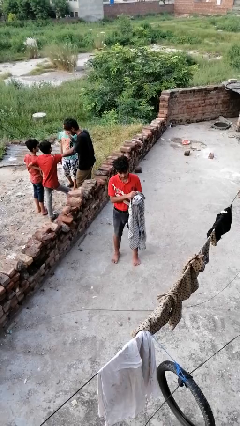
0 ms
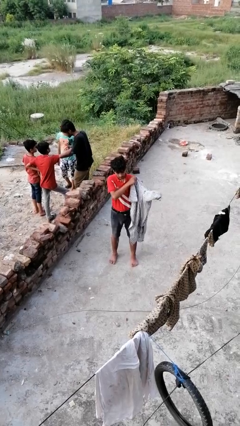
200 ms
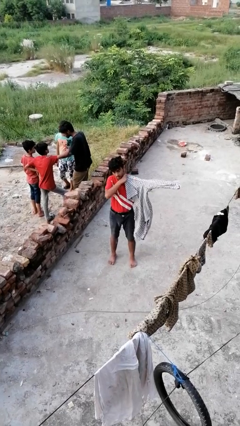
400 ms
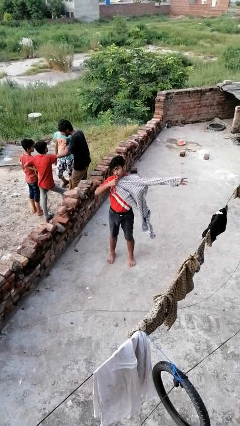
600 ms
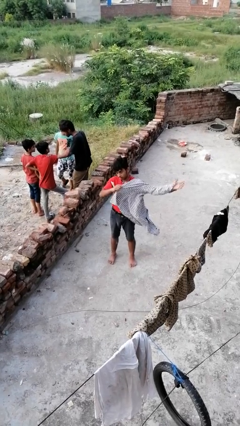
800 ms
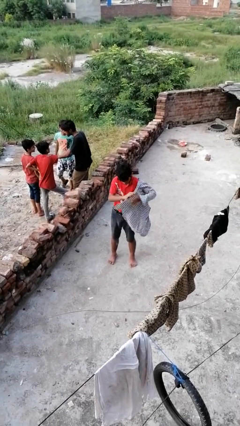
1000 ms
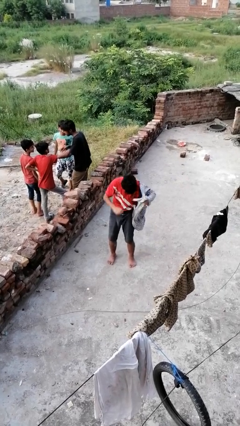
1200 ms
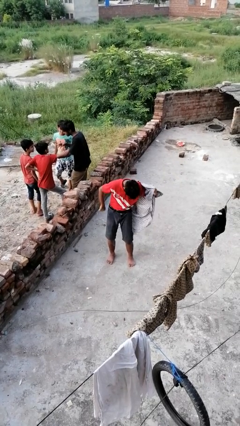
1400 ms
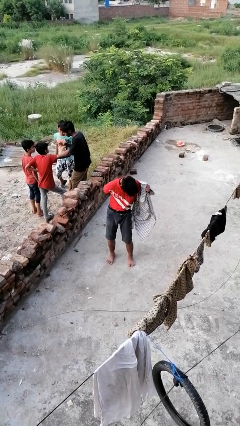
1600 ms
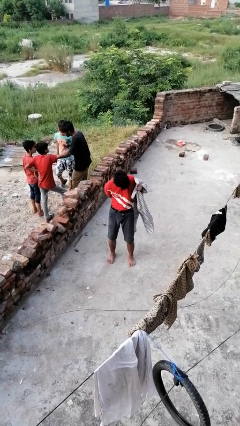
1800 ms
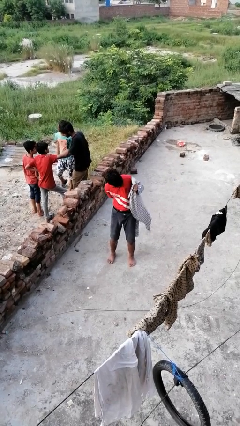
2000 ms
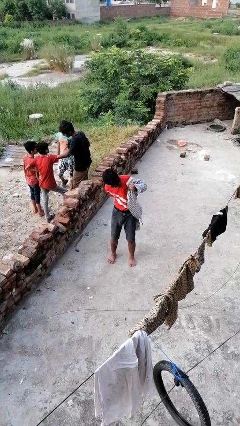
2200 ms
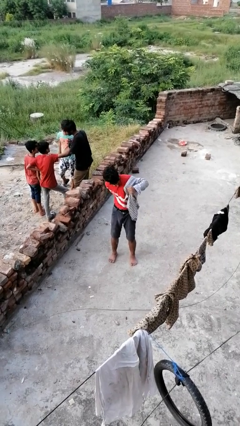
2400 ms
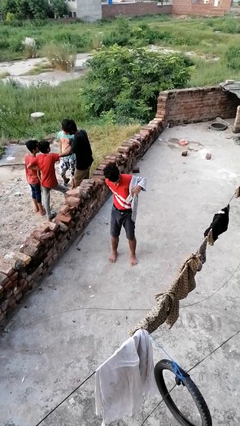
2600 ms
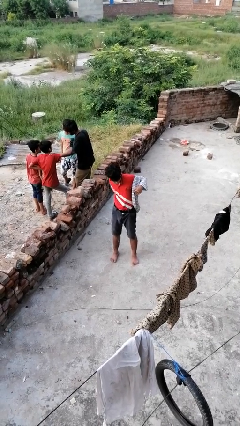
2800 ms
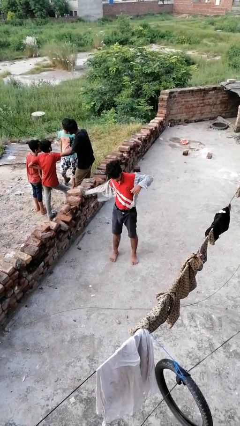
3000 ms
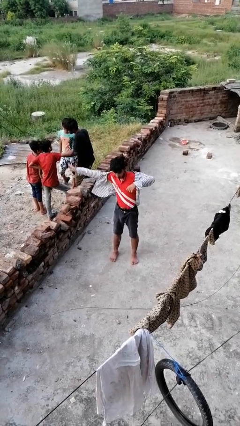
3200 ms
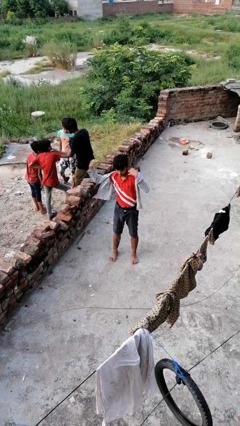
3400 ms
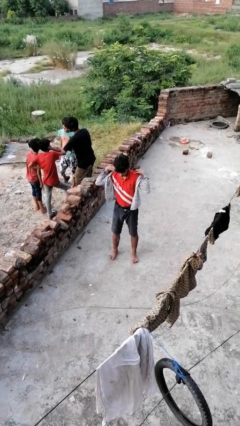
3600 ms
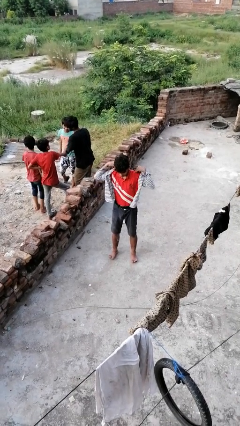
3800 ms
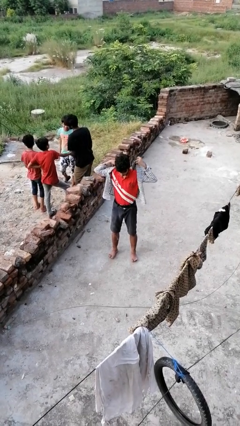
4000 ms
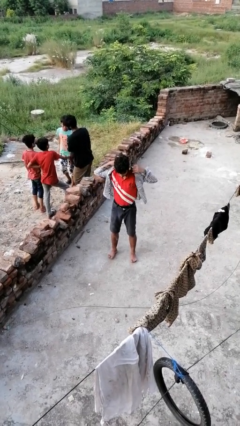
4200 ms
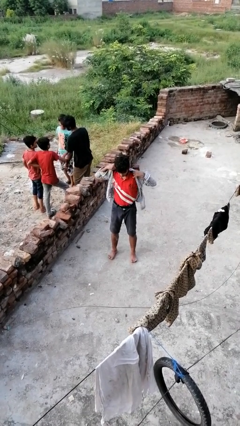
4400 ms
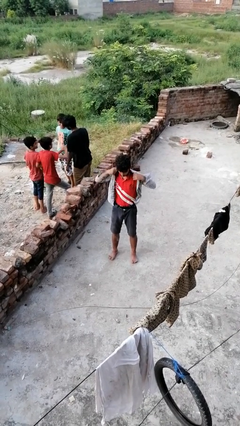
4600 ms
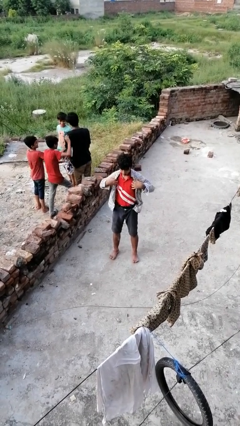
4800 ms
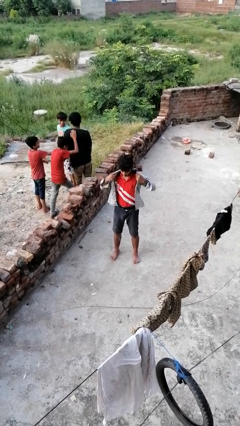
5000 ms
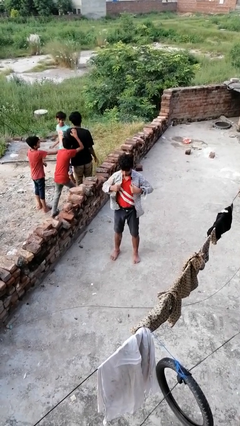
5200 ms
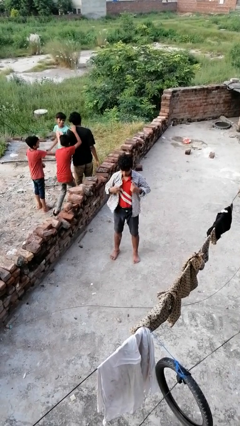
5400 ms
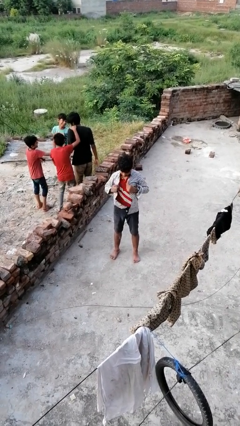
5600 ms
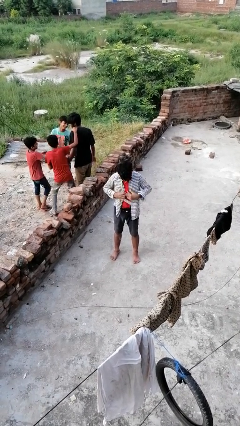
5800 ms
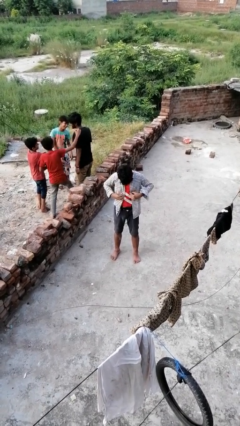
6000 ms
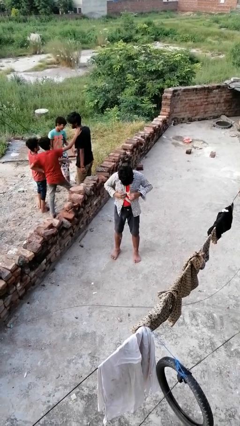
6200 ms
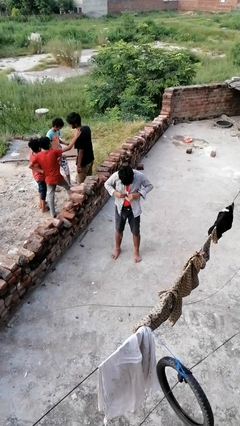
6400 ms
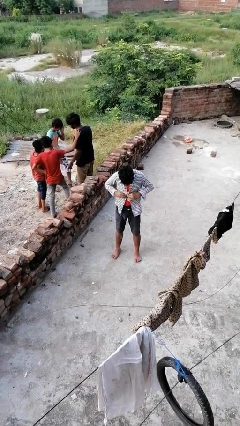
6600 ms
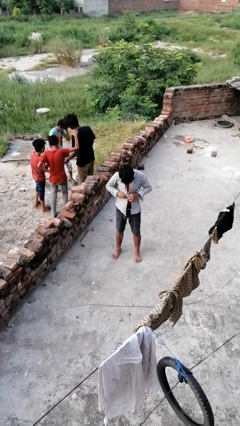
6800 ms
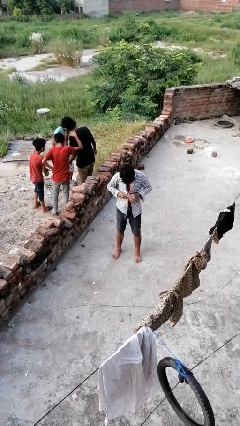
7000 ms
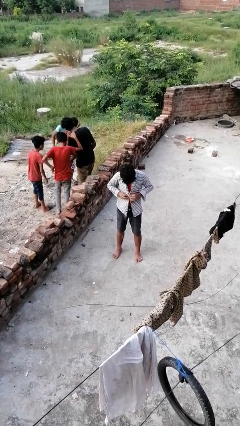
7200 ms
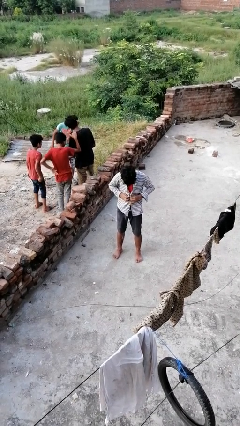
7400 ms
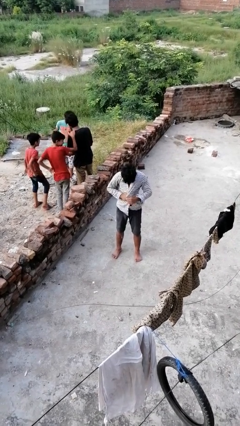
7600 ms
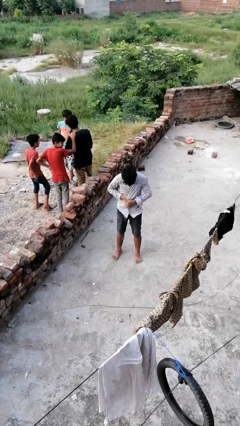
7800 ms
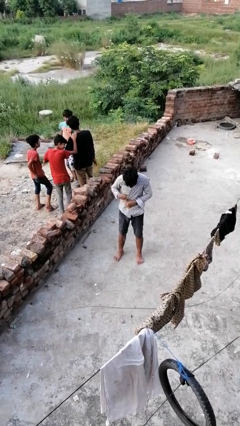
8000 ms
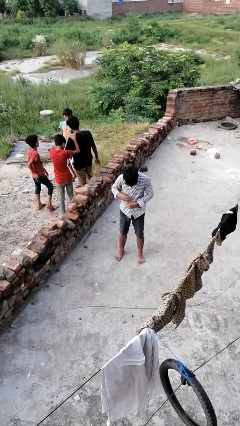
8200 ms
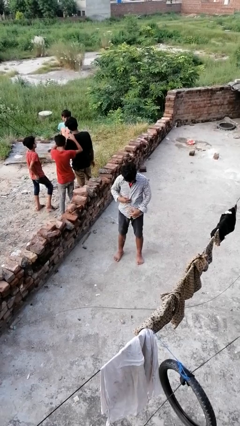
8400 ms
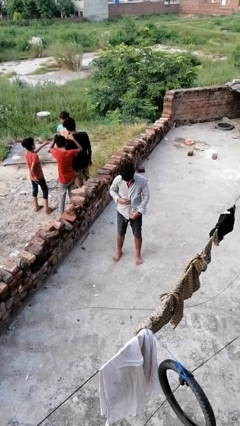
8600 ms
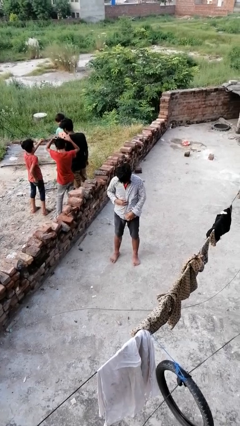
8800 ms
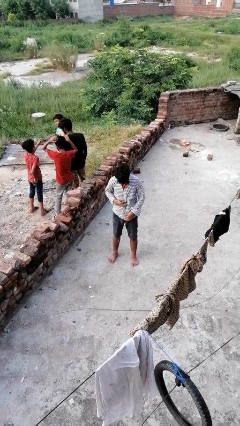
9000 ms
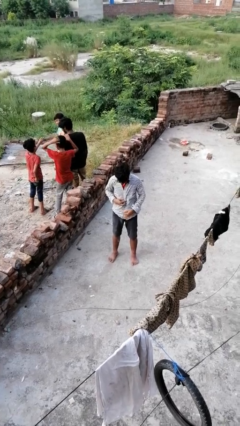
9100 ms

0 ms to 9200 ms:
person puts on shirt

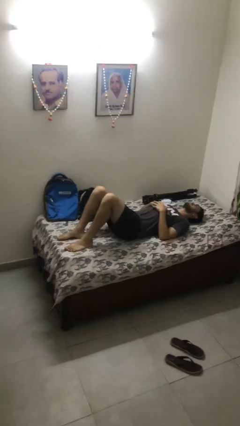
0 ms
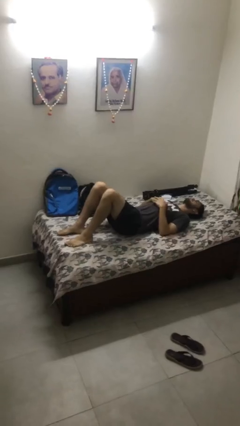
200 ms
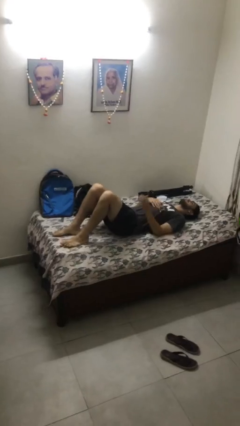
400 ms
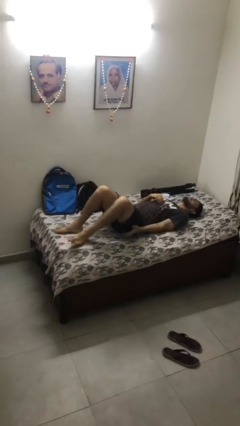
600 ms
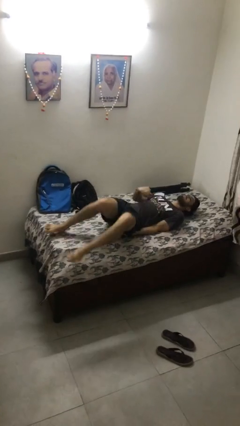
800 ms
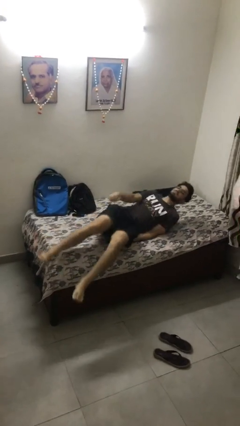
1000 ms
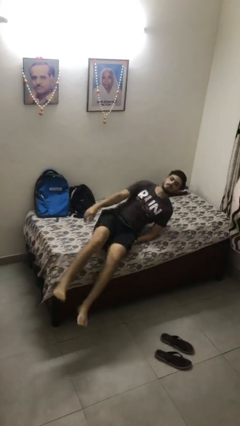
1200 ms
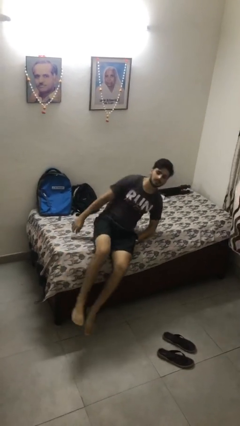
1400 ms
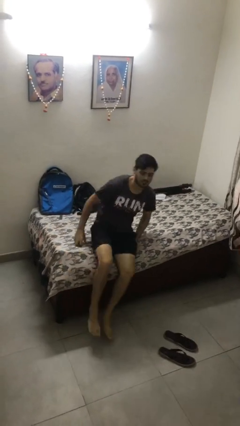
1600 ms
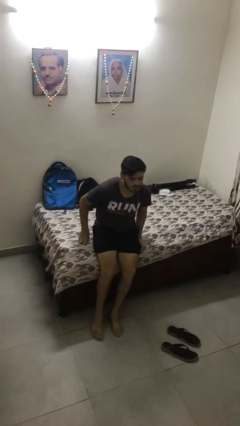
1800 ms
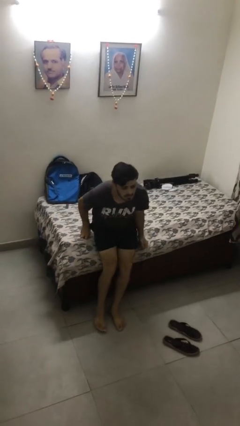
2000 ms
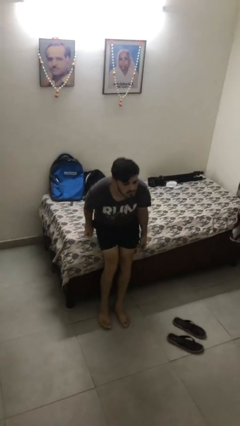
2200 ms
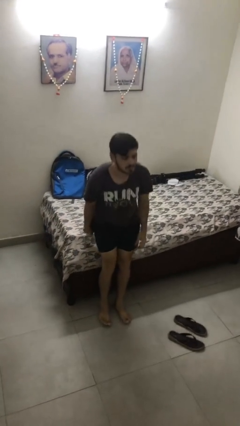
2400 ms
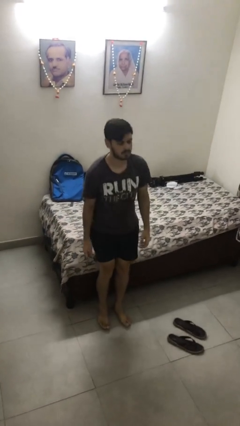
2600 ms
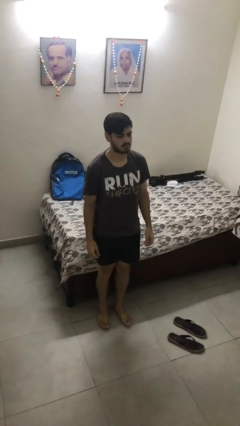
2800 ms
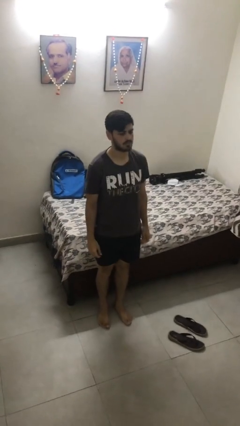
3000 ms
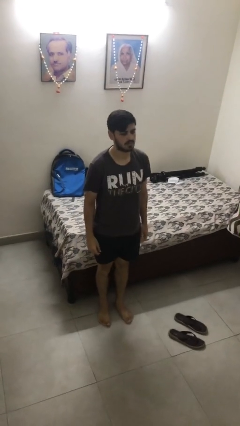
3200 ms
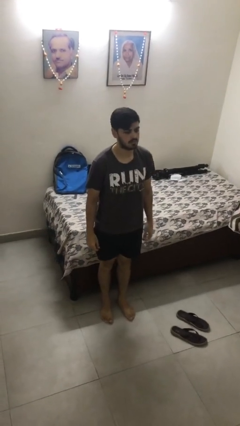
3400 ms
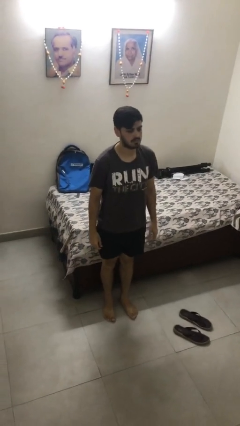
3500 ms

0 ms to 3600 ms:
person stands up

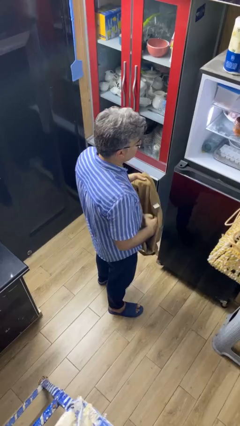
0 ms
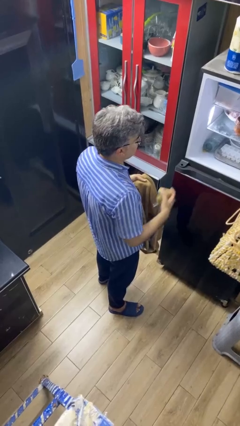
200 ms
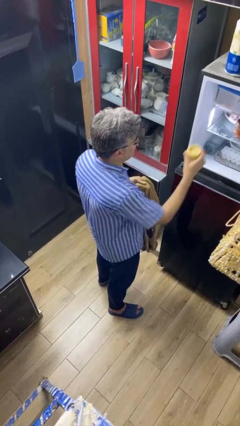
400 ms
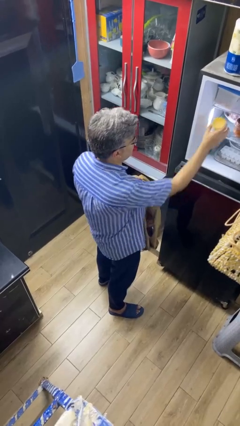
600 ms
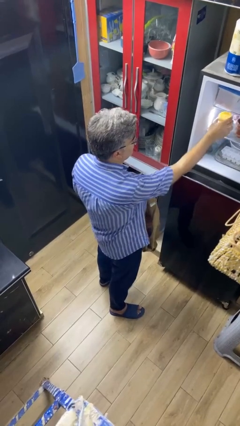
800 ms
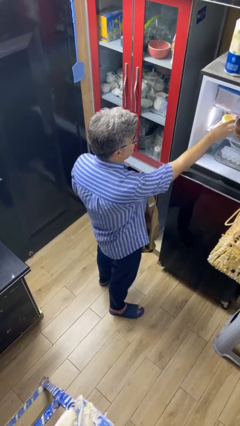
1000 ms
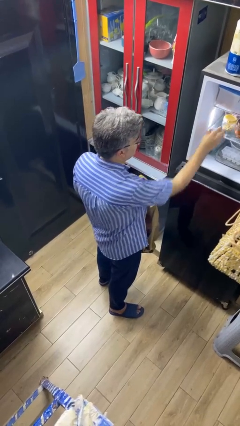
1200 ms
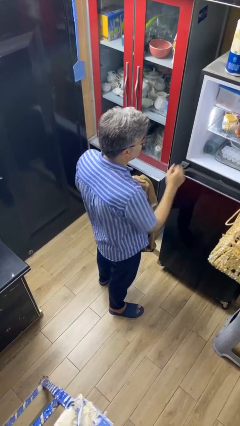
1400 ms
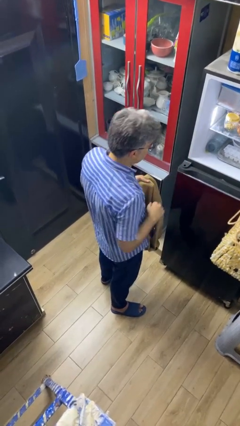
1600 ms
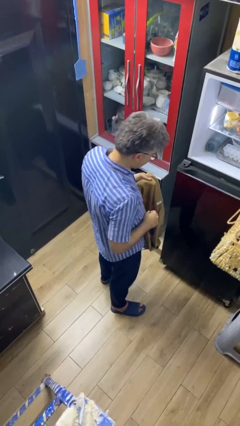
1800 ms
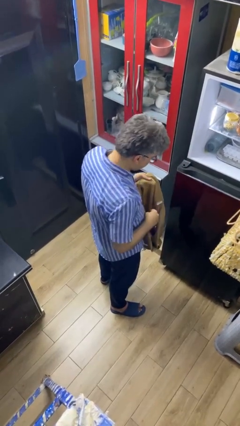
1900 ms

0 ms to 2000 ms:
person loads groceries into refrigerator

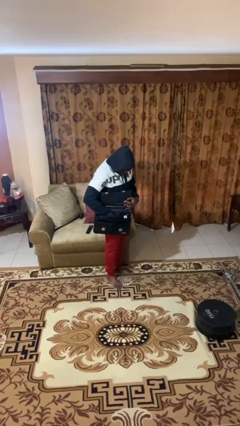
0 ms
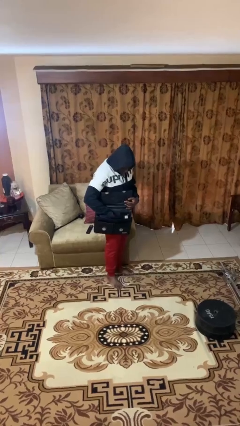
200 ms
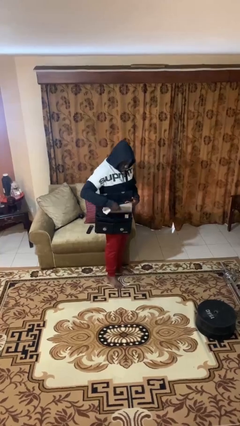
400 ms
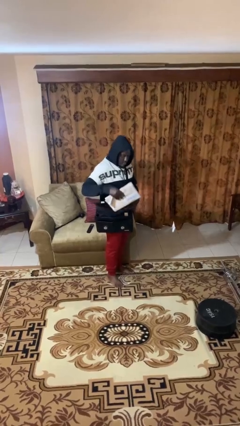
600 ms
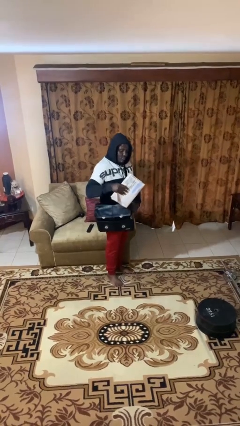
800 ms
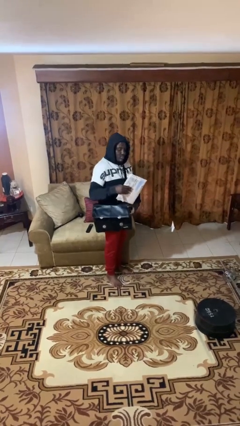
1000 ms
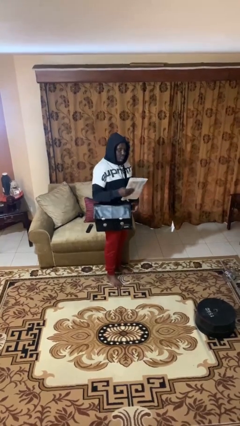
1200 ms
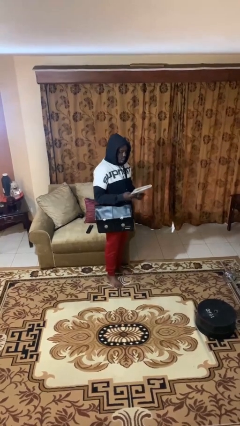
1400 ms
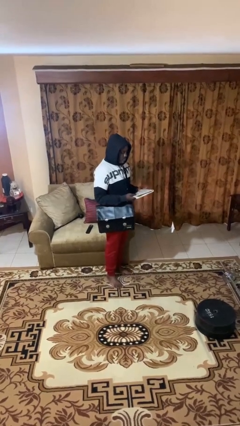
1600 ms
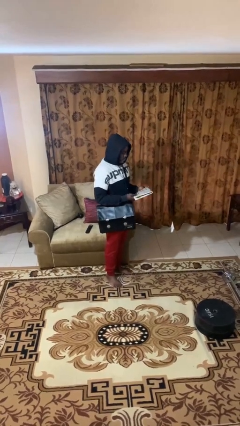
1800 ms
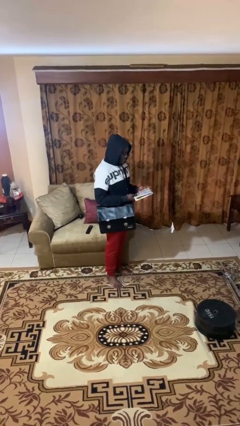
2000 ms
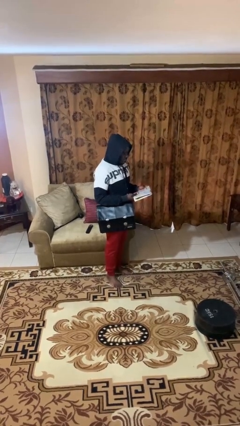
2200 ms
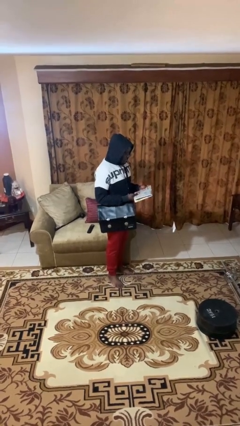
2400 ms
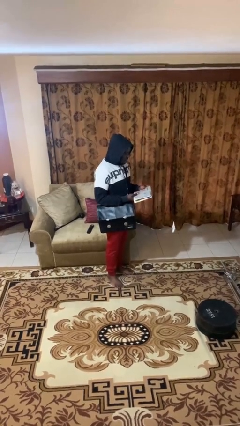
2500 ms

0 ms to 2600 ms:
person takes object from purse

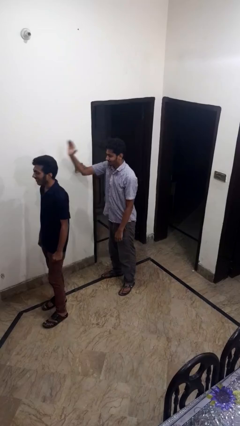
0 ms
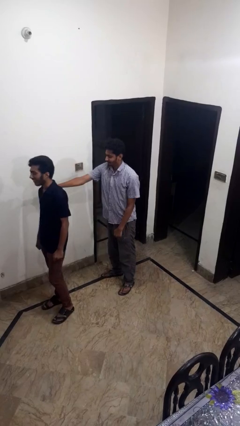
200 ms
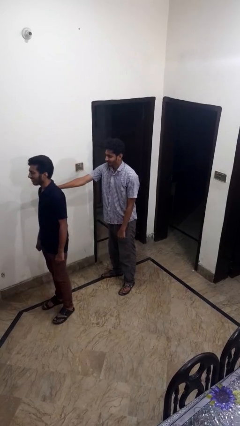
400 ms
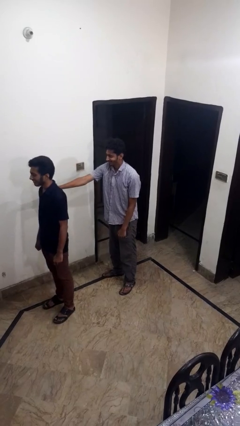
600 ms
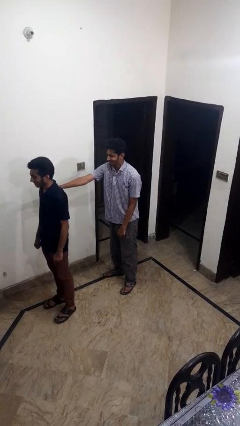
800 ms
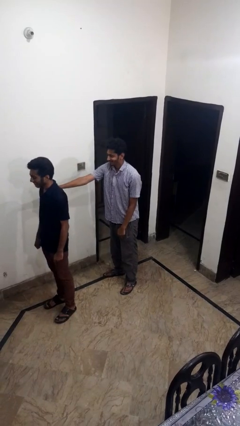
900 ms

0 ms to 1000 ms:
person grabs person by shoulder
